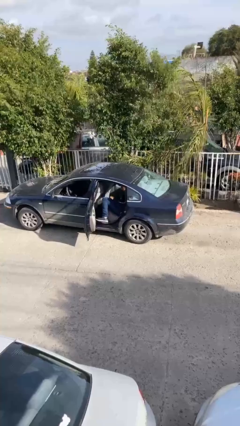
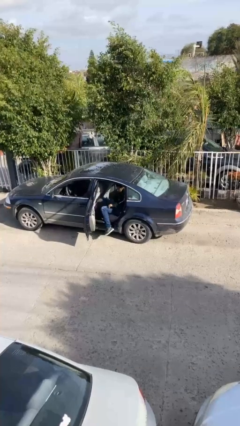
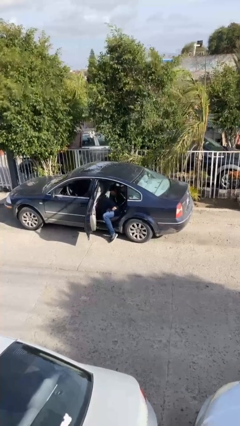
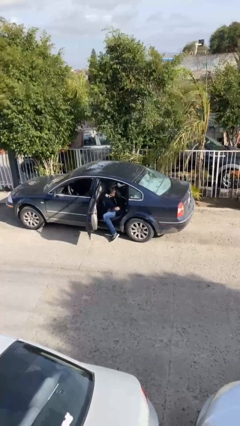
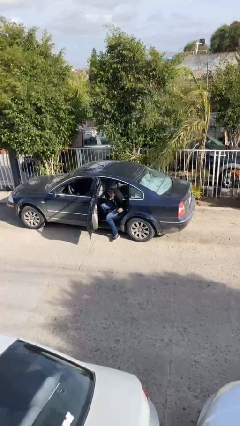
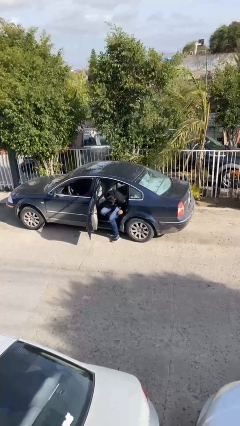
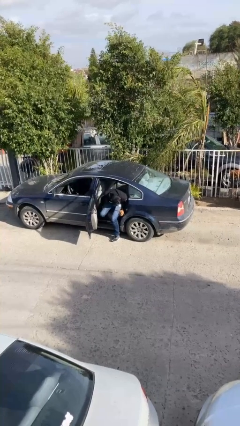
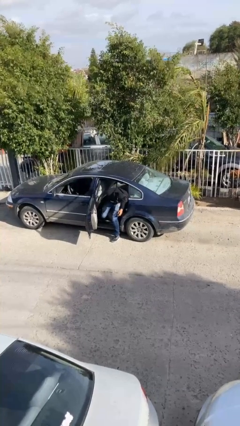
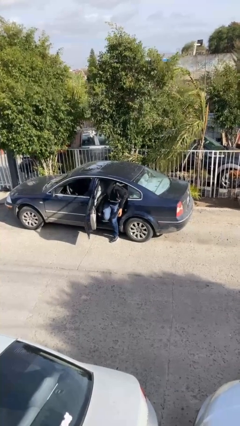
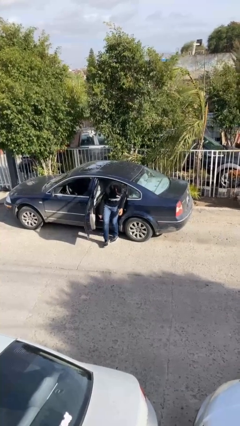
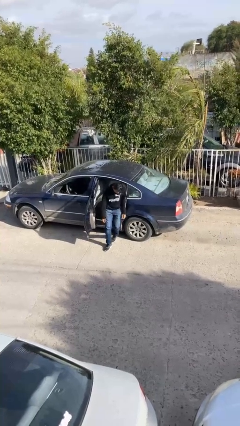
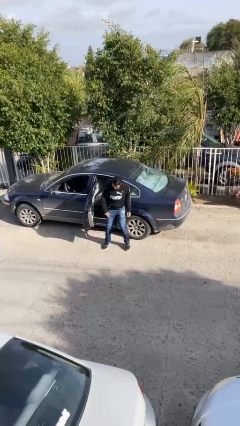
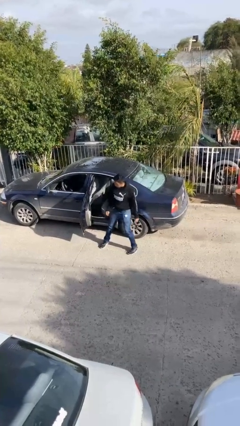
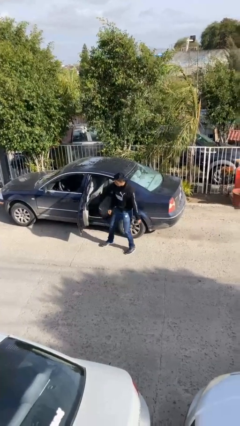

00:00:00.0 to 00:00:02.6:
person exits car

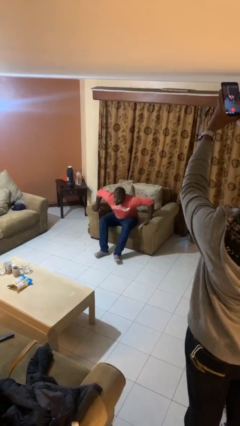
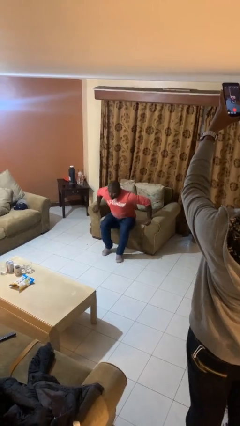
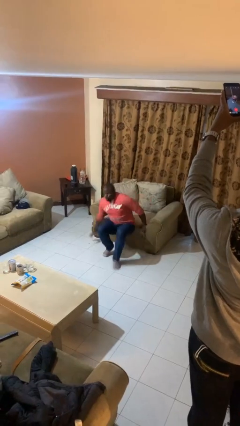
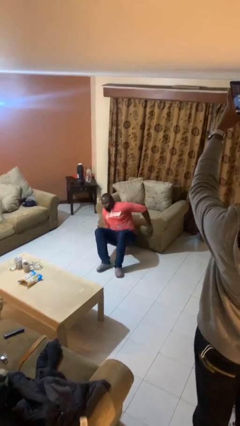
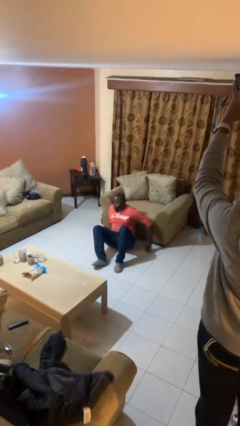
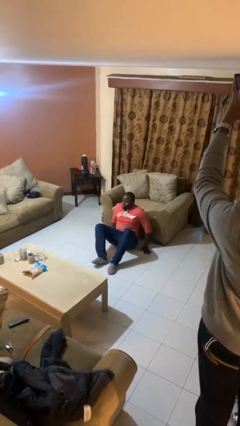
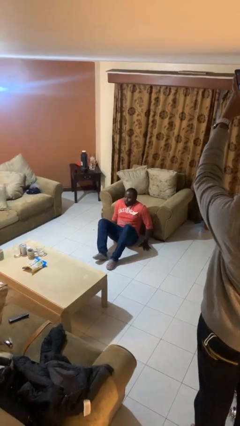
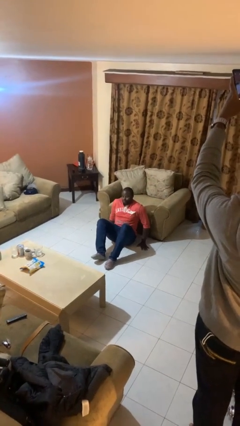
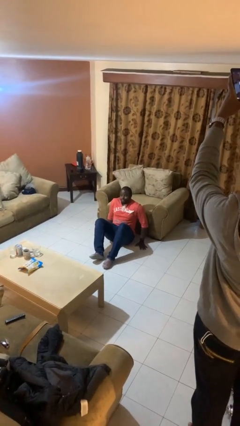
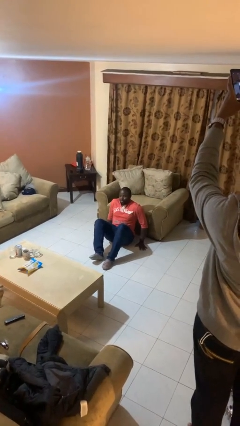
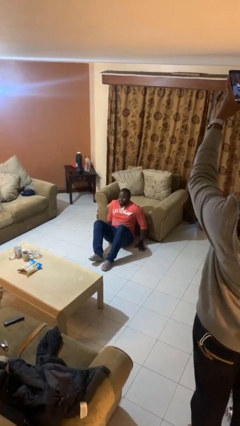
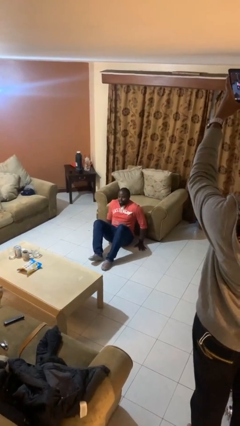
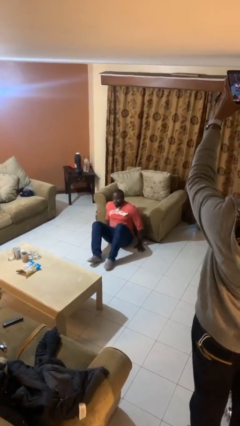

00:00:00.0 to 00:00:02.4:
person falls from chair

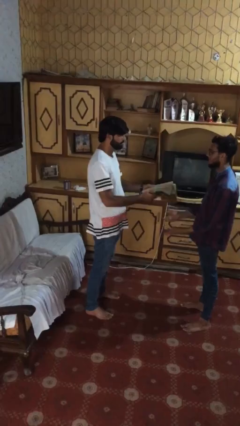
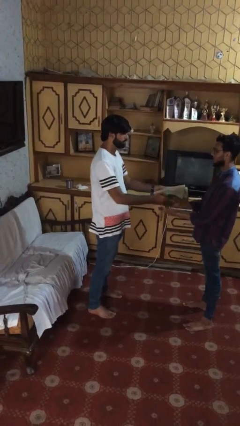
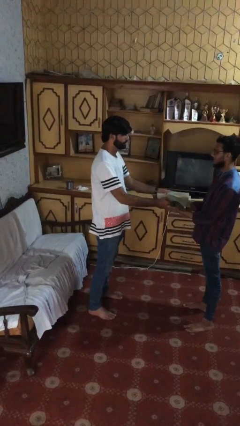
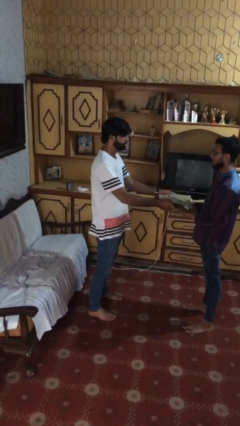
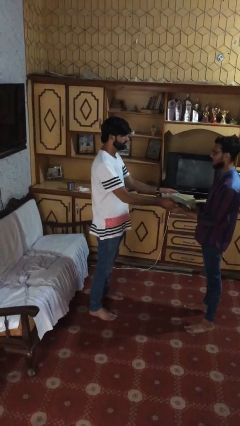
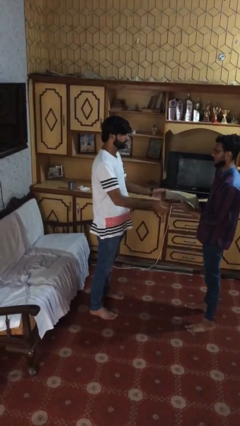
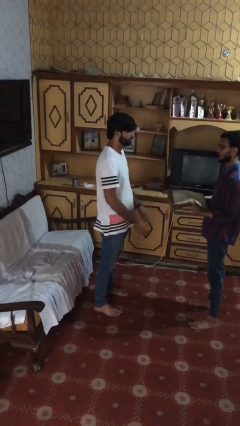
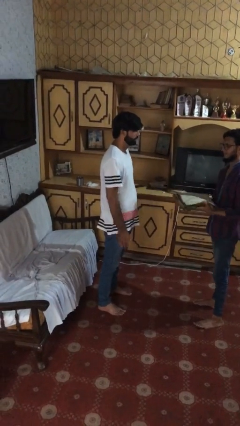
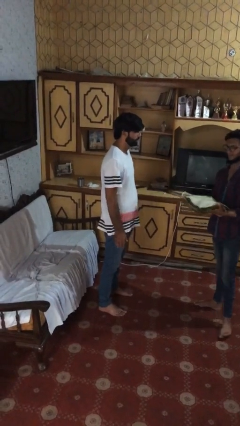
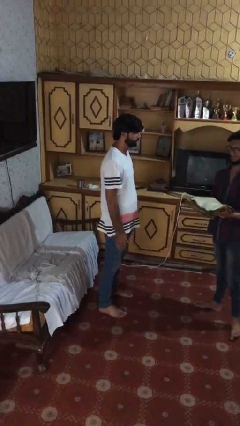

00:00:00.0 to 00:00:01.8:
person transfers object to person

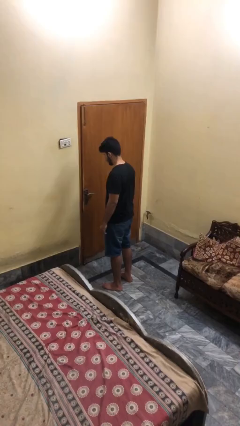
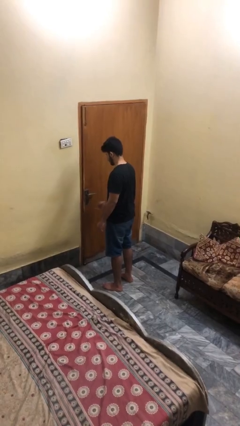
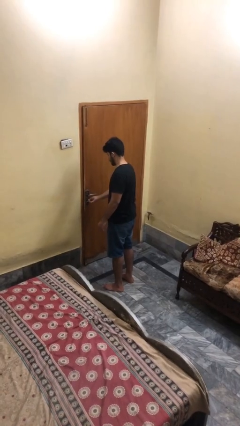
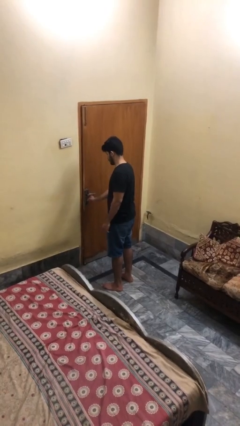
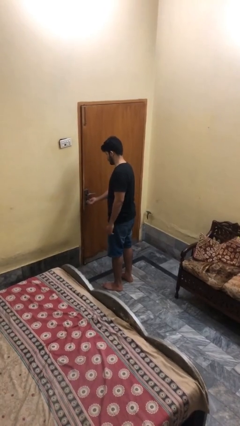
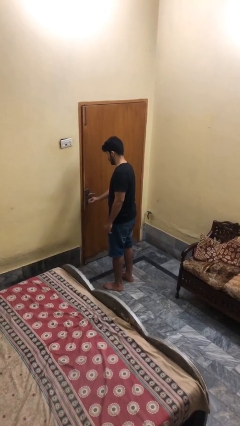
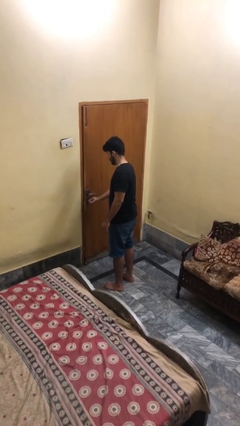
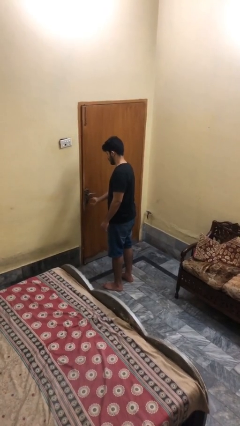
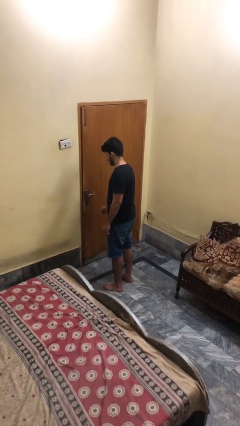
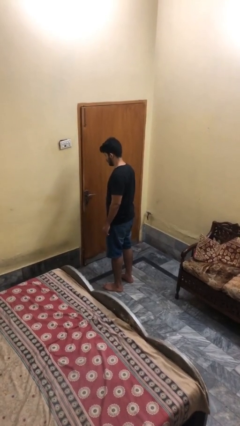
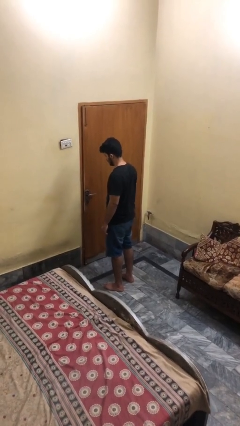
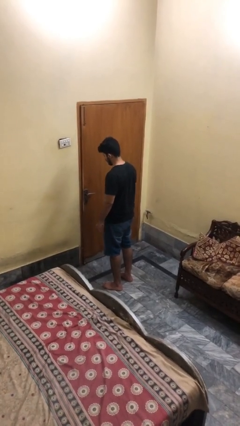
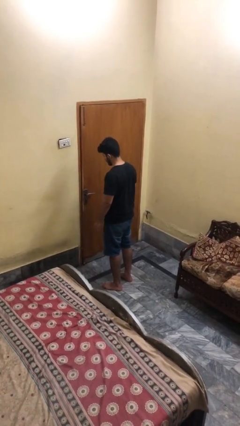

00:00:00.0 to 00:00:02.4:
person locks door with keys

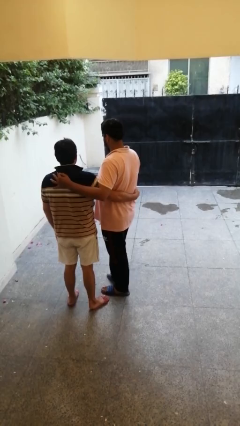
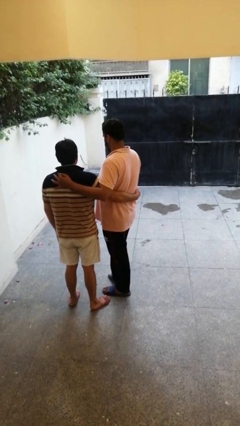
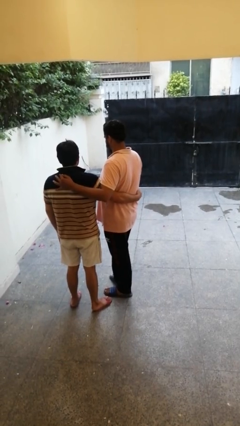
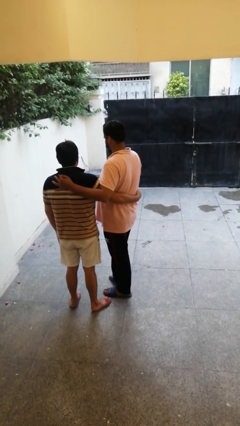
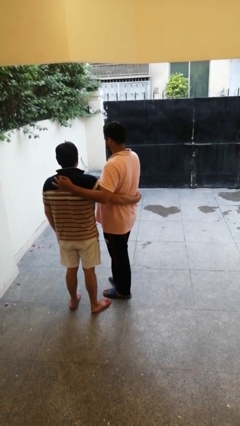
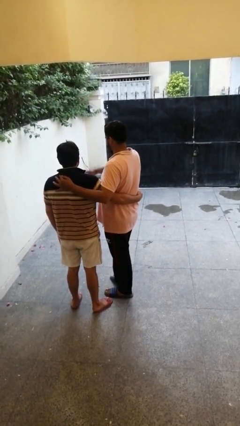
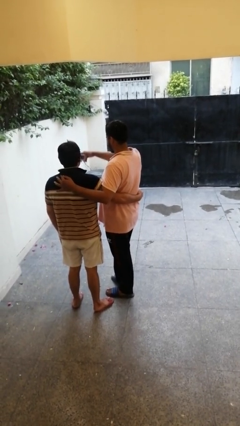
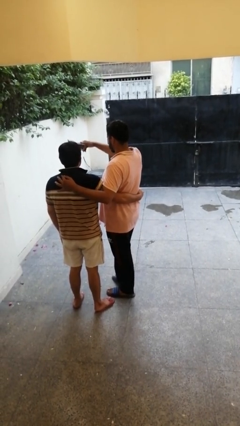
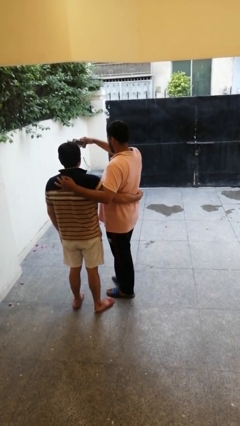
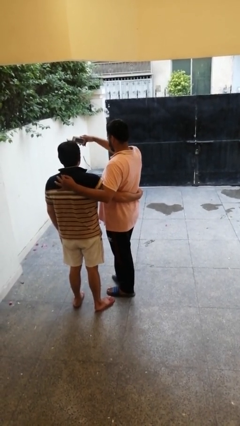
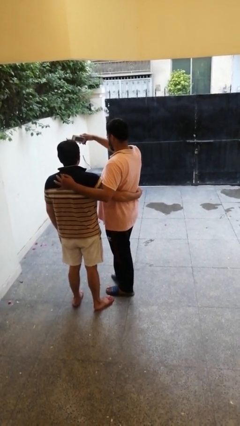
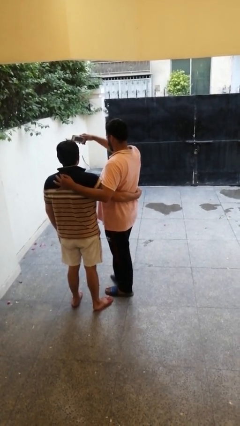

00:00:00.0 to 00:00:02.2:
person takes selfie with person

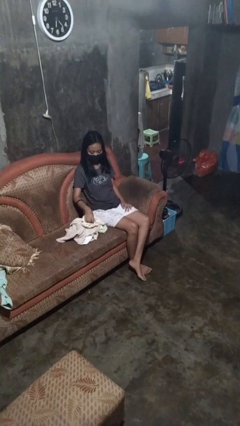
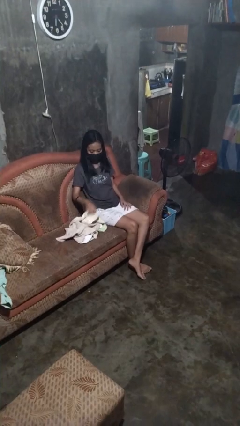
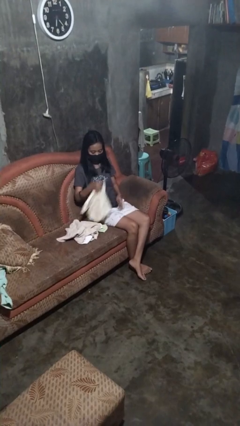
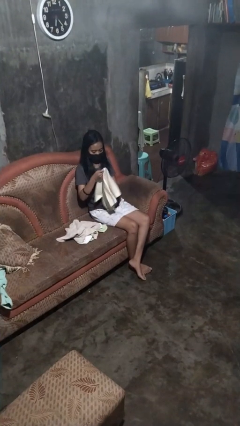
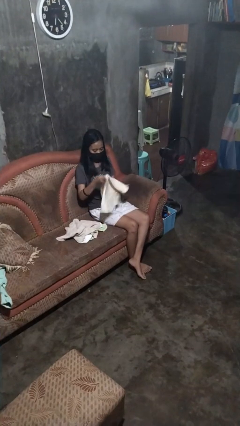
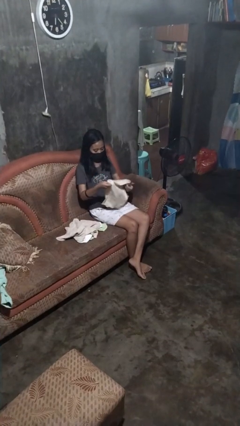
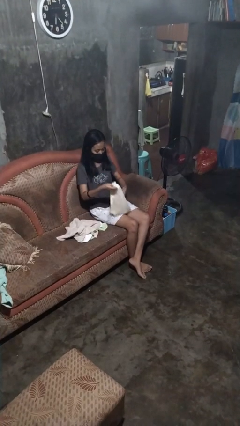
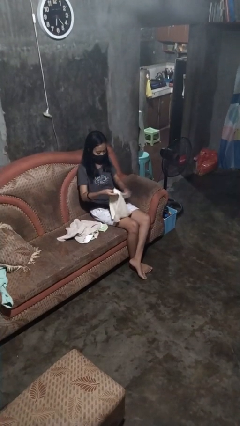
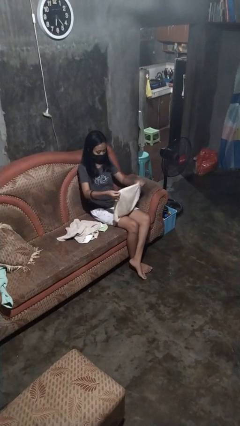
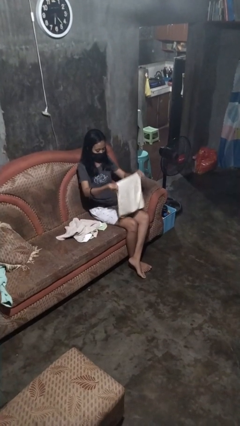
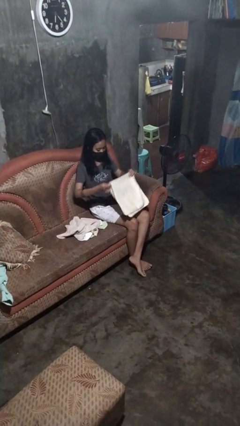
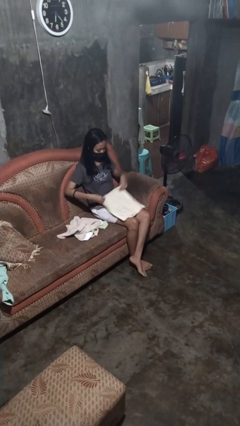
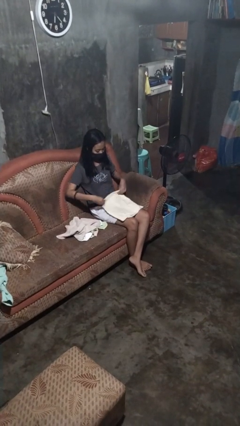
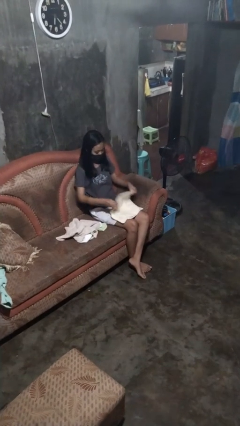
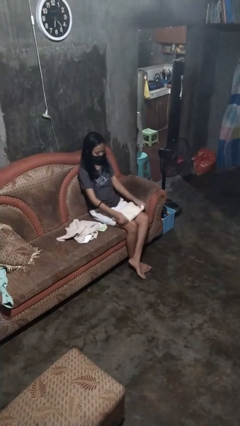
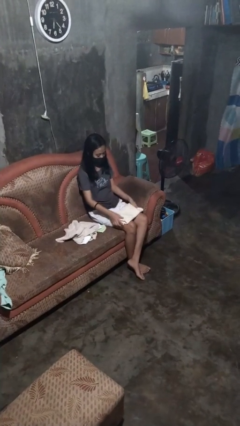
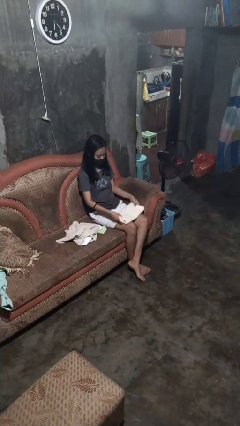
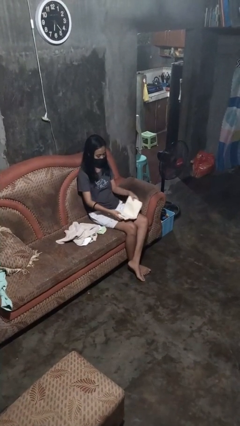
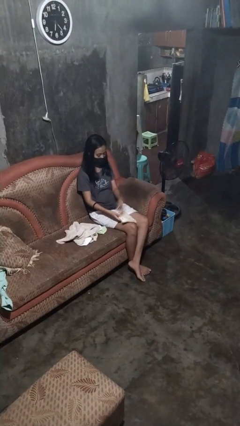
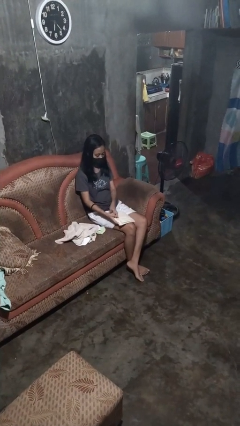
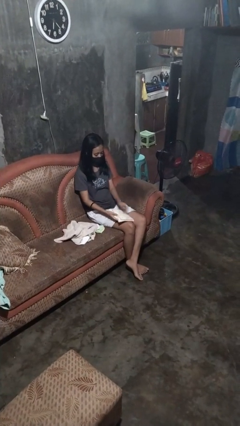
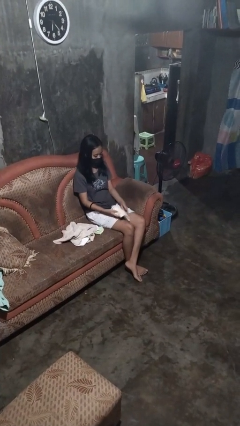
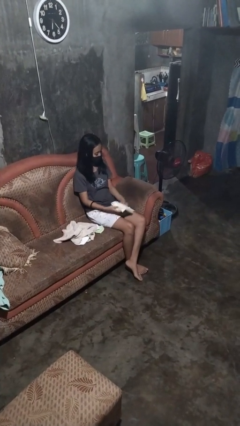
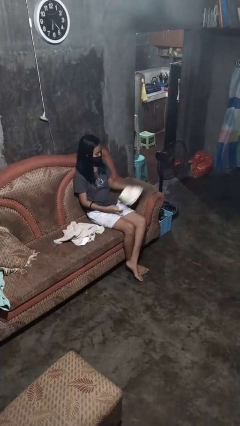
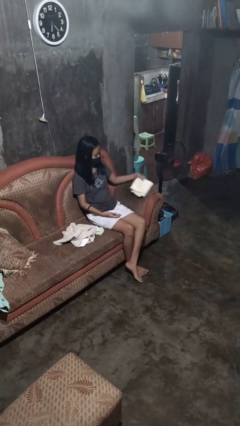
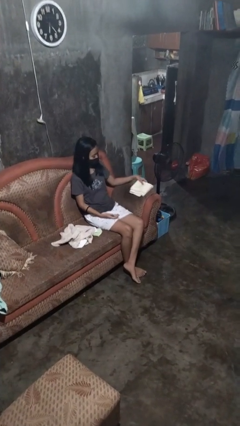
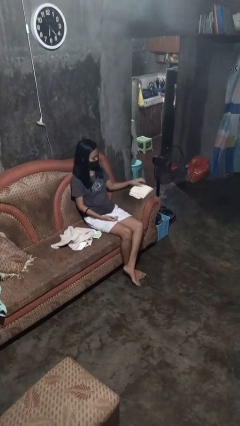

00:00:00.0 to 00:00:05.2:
person folds towel

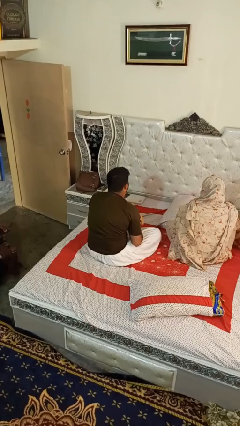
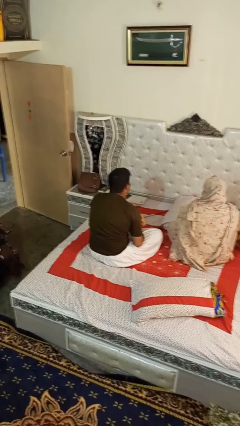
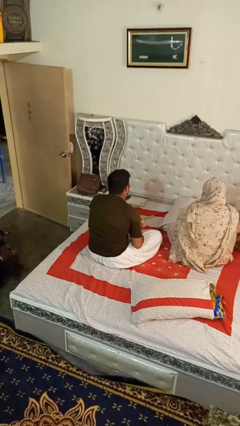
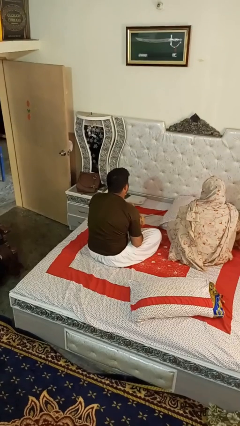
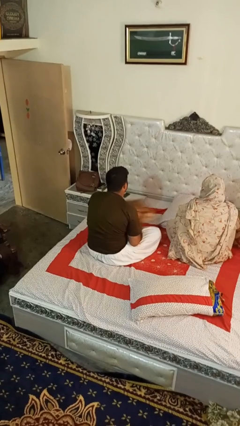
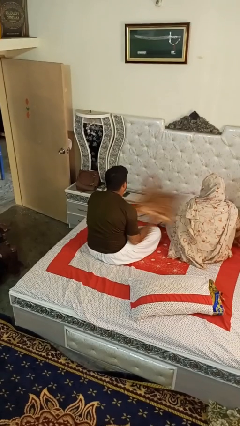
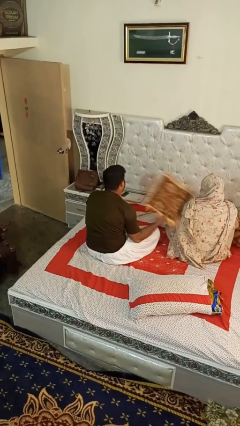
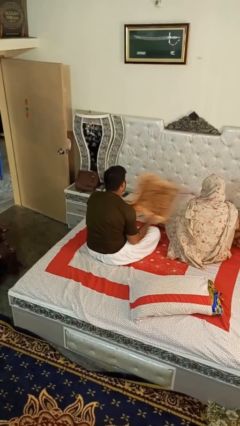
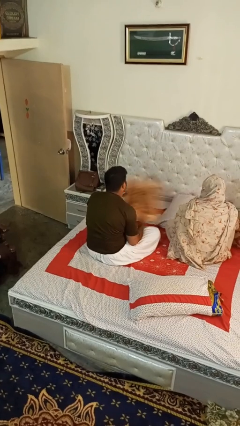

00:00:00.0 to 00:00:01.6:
person hits person with pillow
